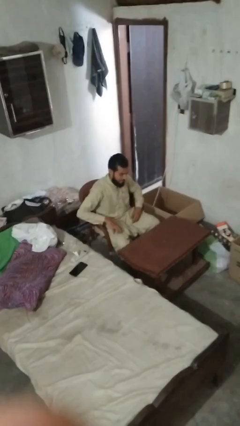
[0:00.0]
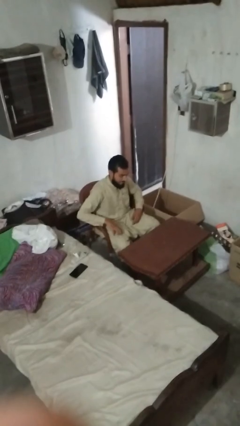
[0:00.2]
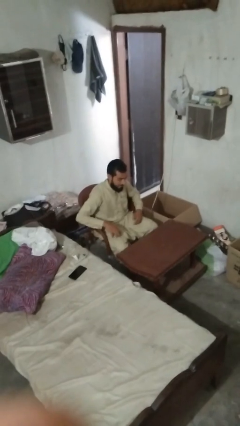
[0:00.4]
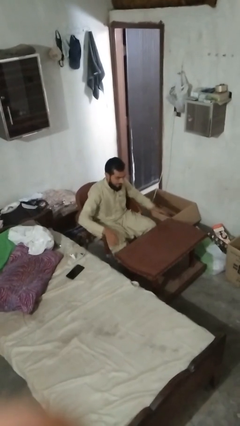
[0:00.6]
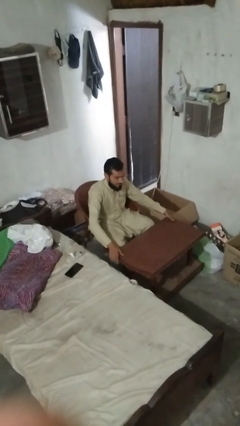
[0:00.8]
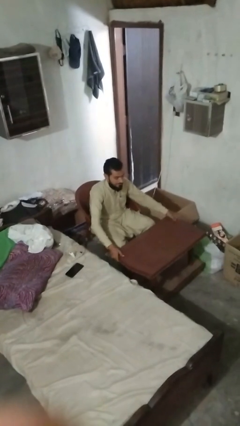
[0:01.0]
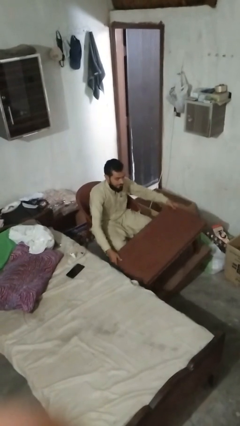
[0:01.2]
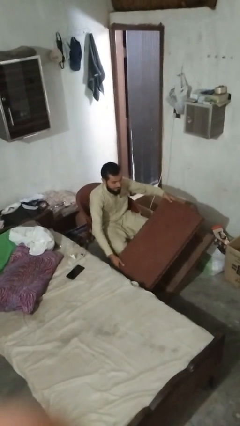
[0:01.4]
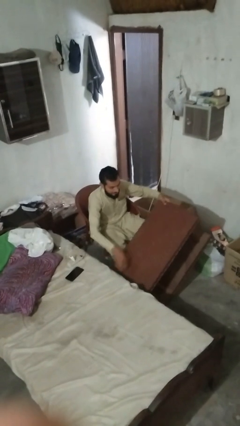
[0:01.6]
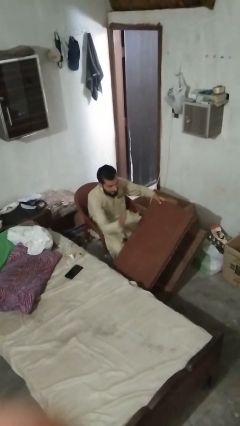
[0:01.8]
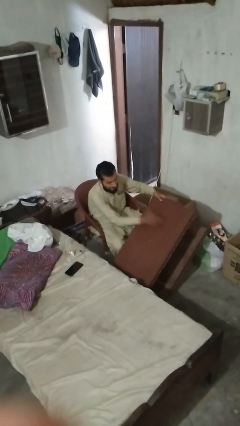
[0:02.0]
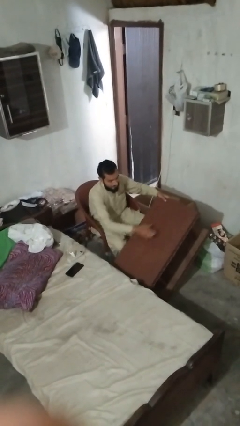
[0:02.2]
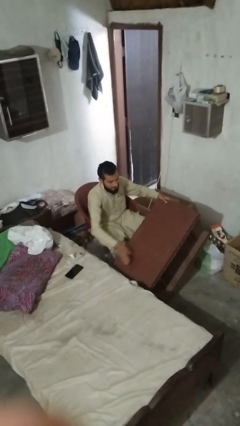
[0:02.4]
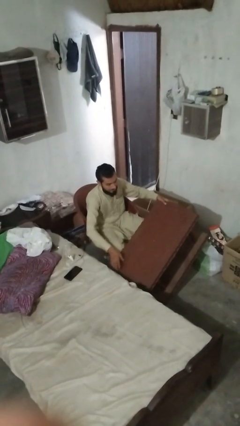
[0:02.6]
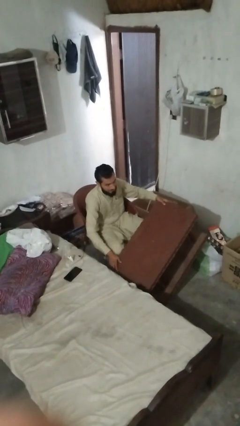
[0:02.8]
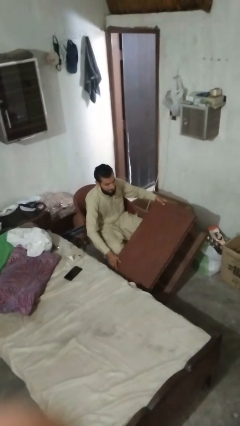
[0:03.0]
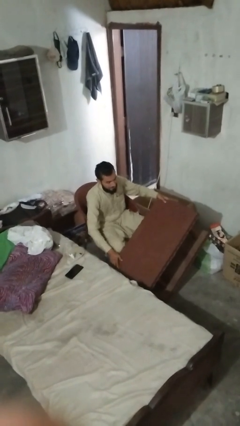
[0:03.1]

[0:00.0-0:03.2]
person knocks over furniture

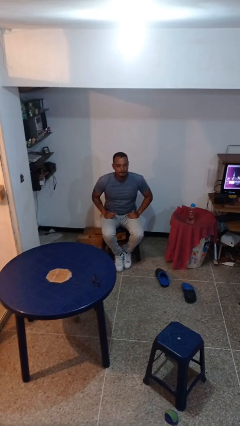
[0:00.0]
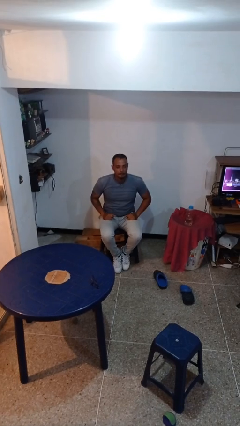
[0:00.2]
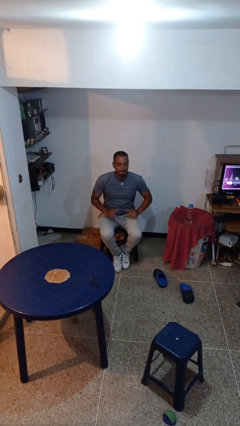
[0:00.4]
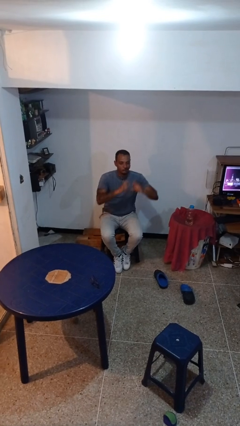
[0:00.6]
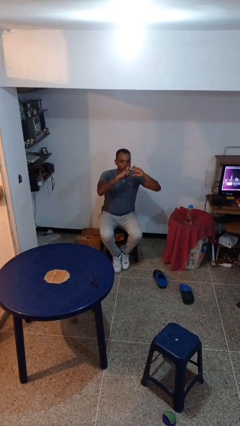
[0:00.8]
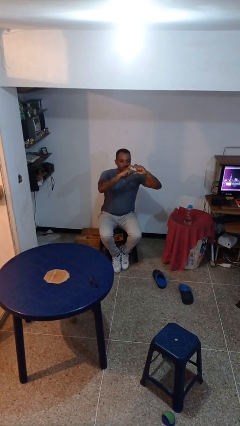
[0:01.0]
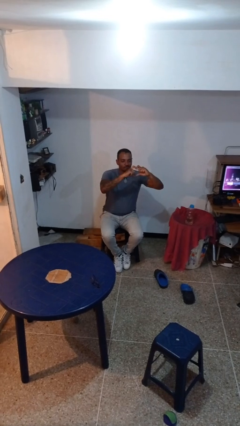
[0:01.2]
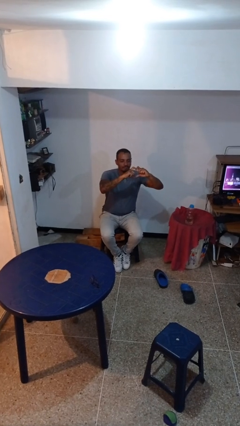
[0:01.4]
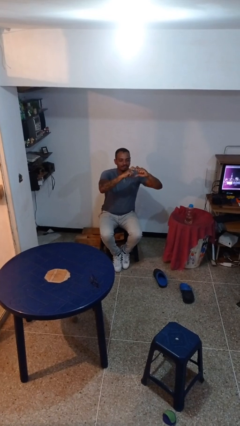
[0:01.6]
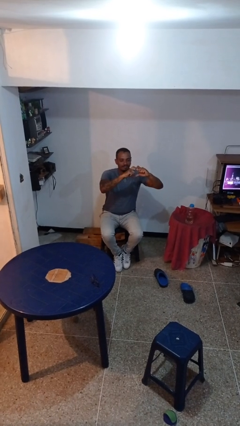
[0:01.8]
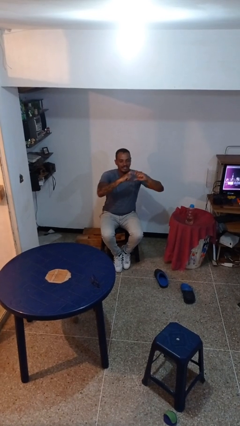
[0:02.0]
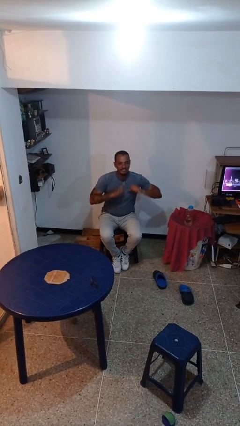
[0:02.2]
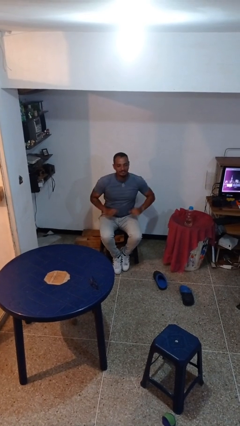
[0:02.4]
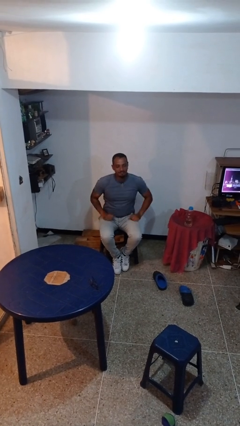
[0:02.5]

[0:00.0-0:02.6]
person gestures heart

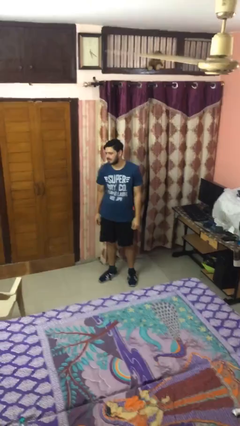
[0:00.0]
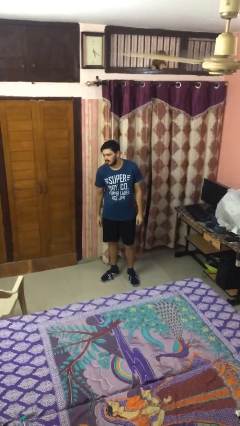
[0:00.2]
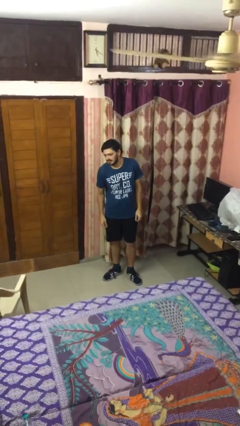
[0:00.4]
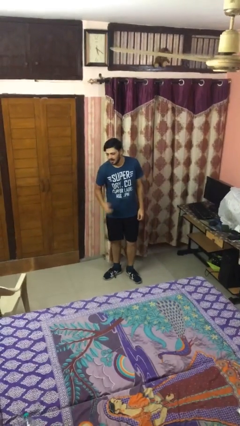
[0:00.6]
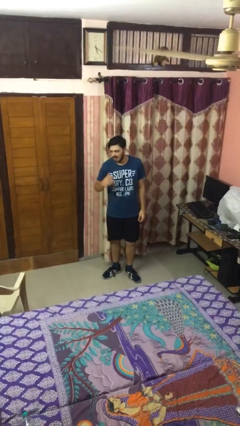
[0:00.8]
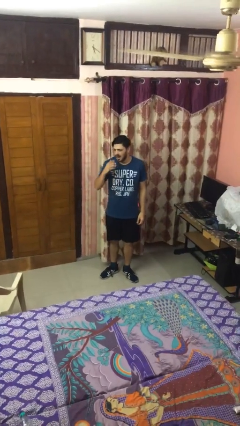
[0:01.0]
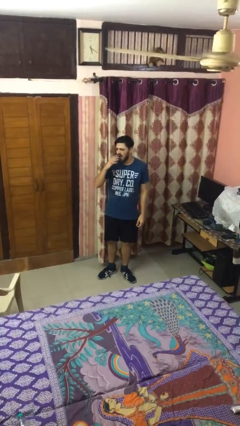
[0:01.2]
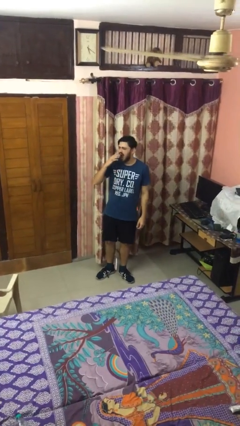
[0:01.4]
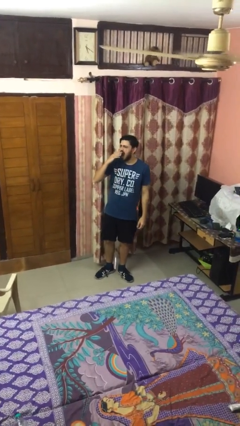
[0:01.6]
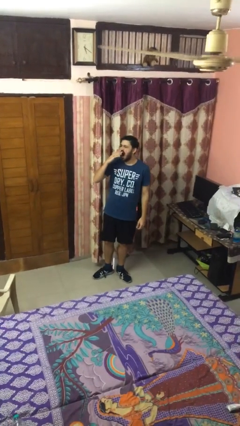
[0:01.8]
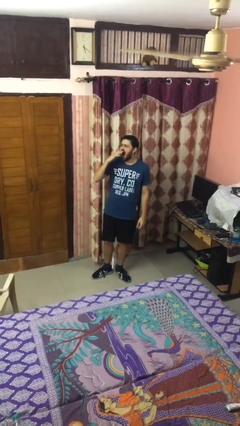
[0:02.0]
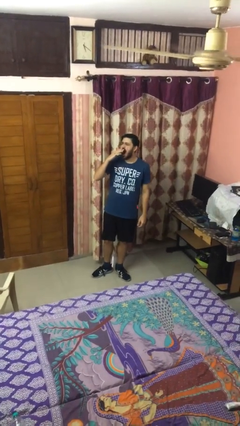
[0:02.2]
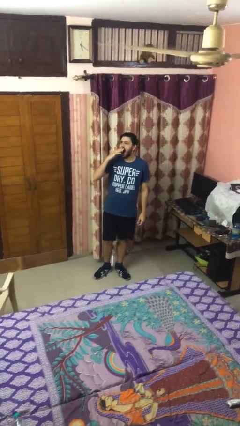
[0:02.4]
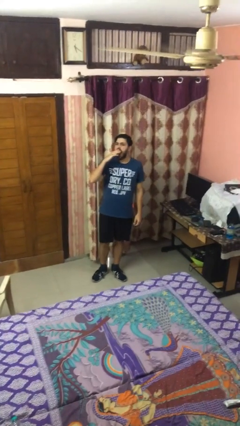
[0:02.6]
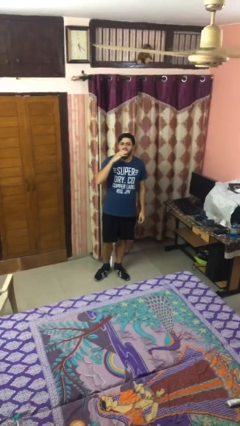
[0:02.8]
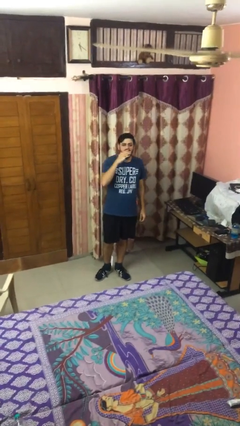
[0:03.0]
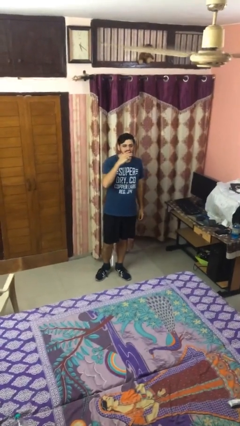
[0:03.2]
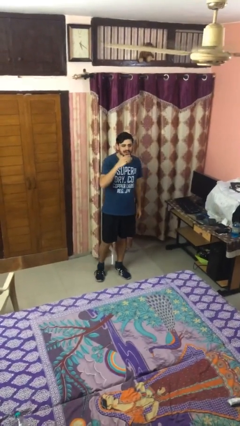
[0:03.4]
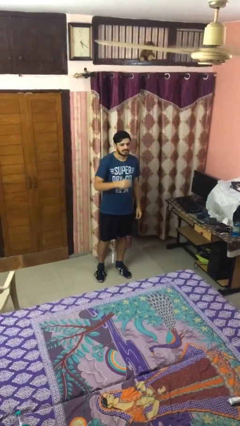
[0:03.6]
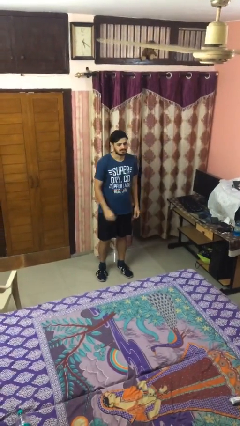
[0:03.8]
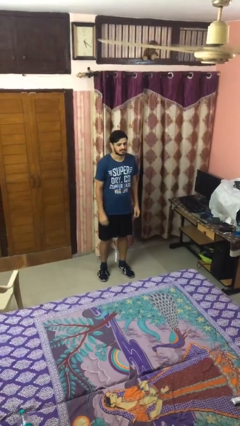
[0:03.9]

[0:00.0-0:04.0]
person yawns

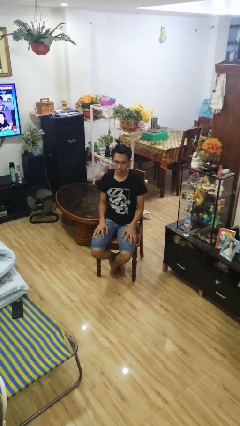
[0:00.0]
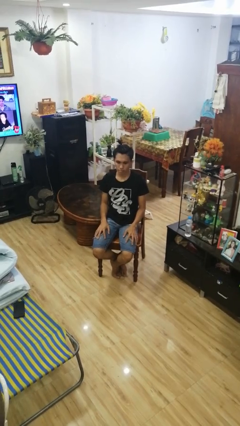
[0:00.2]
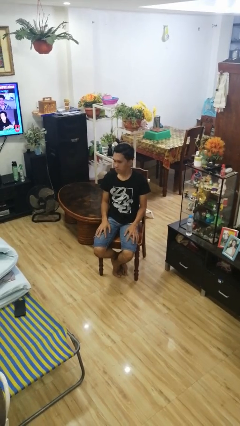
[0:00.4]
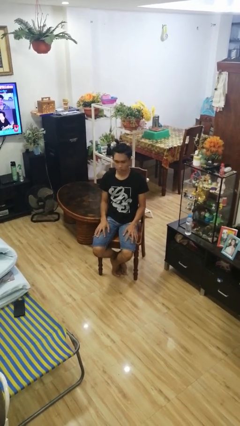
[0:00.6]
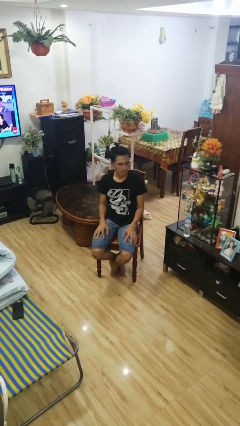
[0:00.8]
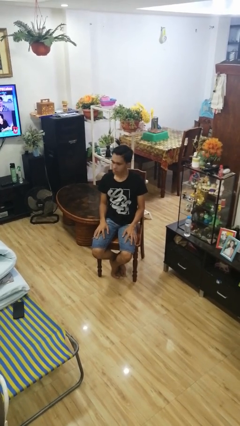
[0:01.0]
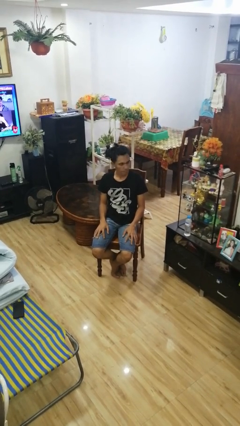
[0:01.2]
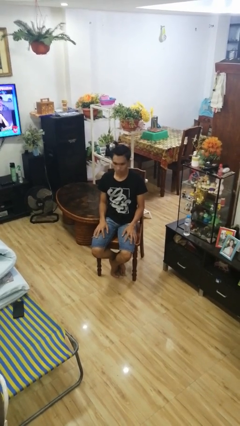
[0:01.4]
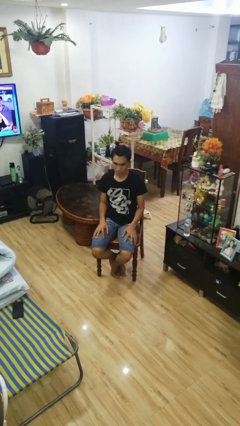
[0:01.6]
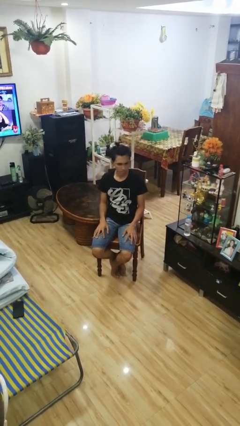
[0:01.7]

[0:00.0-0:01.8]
person shakes head

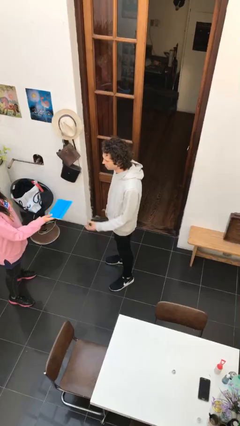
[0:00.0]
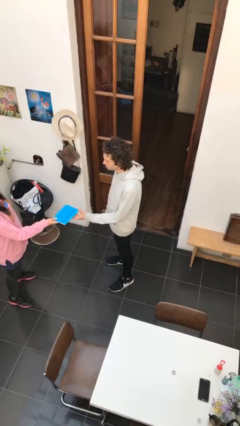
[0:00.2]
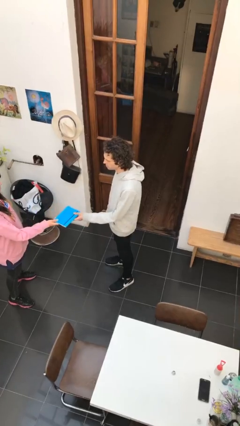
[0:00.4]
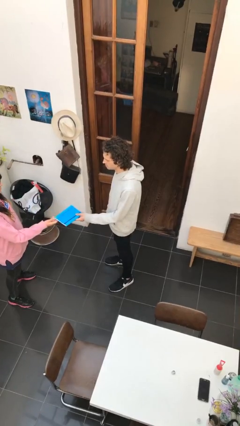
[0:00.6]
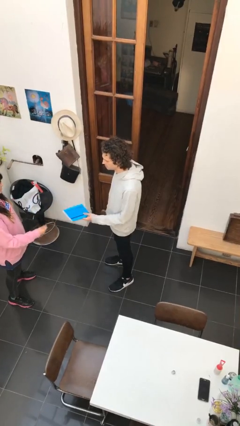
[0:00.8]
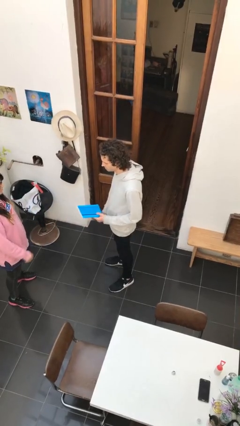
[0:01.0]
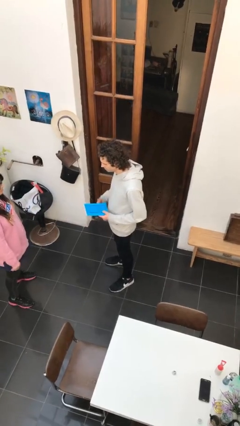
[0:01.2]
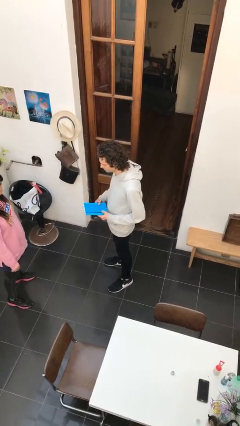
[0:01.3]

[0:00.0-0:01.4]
person transfers object to person

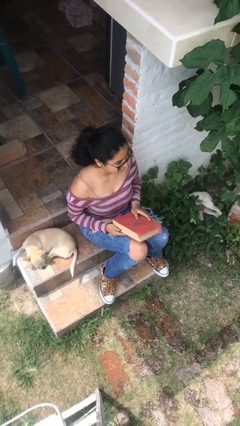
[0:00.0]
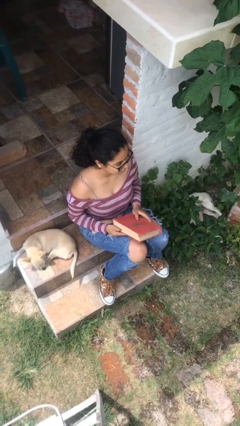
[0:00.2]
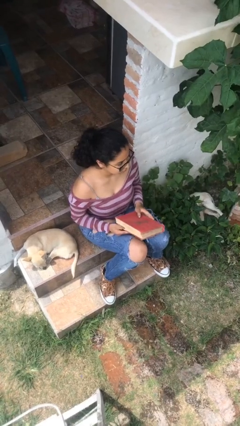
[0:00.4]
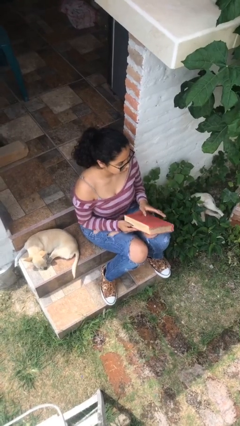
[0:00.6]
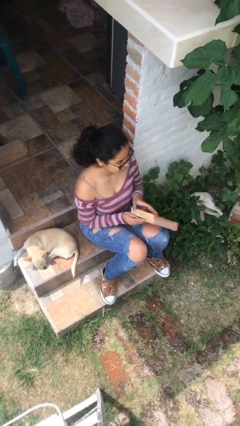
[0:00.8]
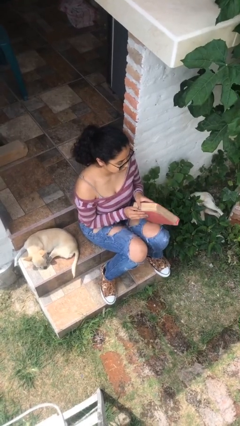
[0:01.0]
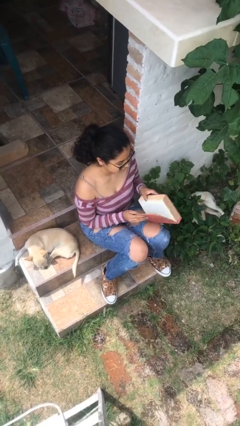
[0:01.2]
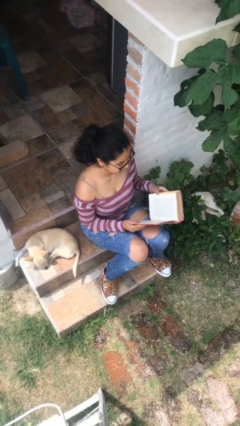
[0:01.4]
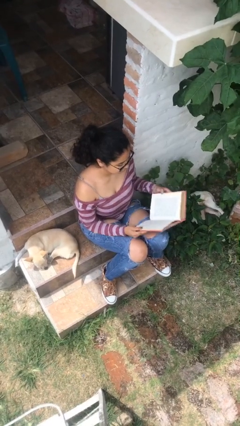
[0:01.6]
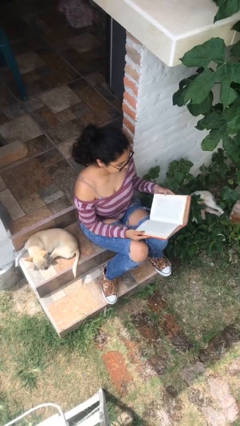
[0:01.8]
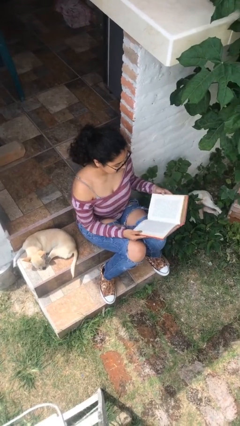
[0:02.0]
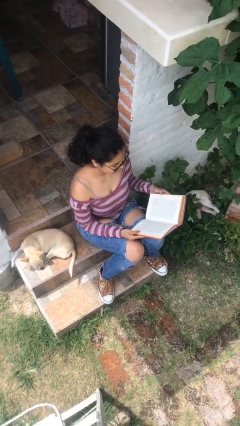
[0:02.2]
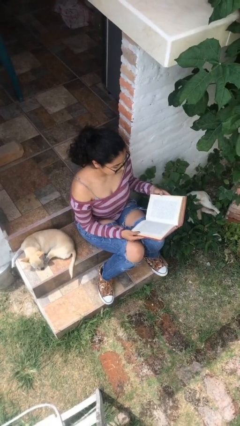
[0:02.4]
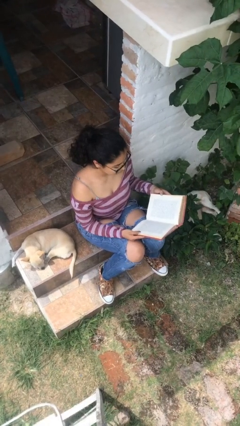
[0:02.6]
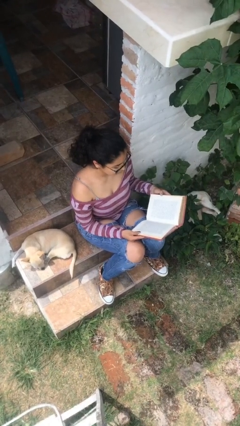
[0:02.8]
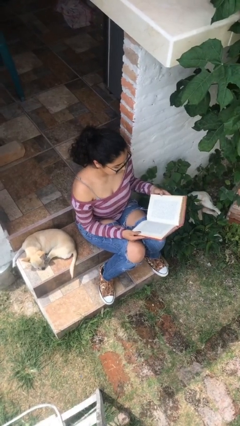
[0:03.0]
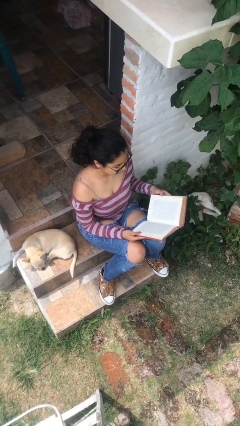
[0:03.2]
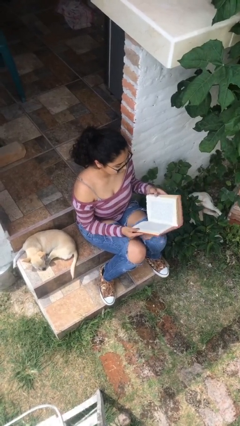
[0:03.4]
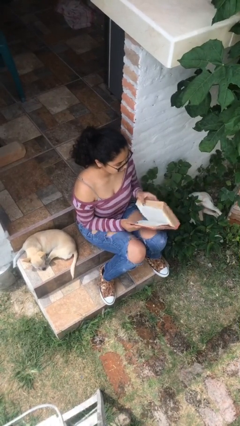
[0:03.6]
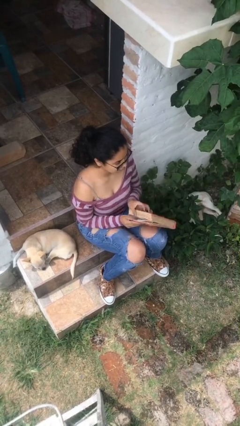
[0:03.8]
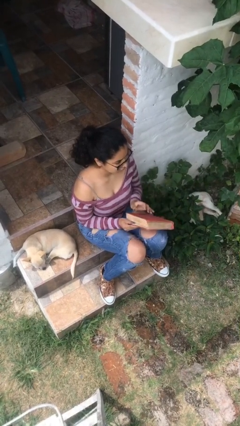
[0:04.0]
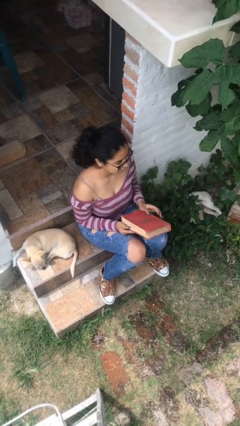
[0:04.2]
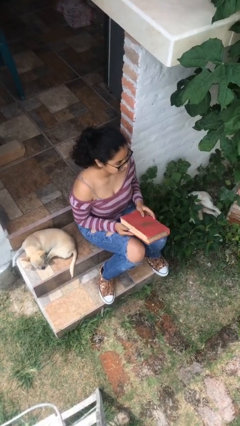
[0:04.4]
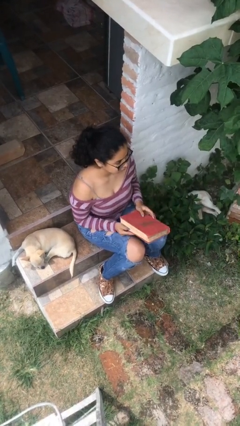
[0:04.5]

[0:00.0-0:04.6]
person reads book
